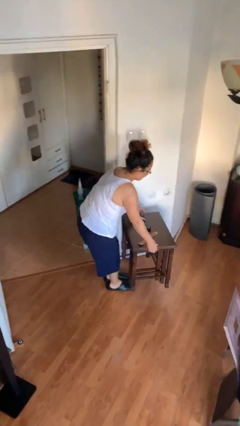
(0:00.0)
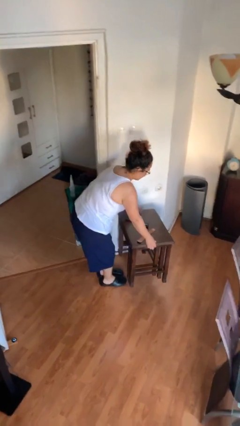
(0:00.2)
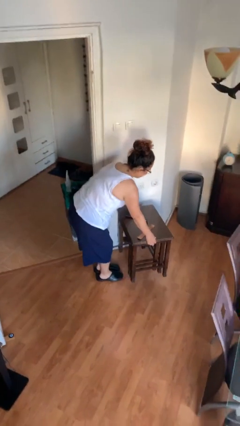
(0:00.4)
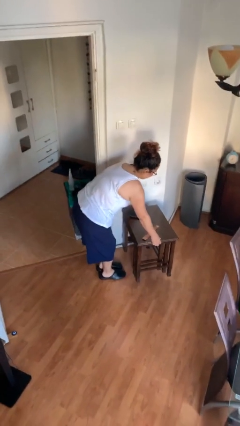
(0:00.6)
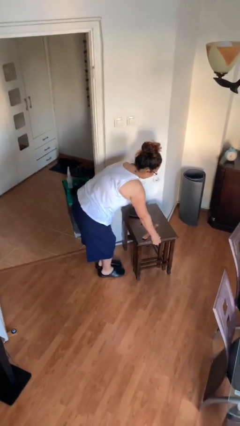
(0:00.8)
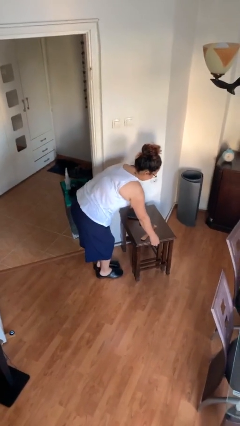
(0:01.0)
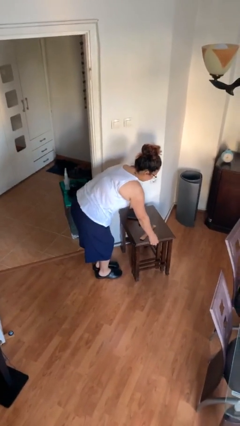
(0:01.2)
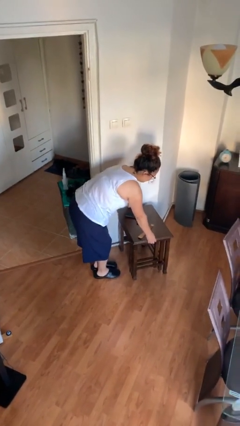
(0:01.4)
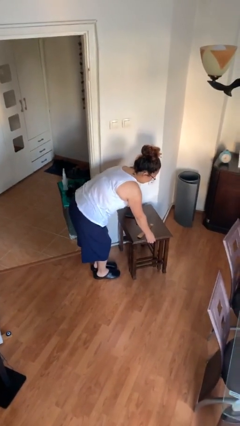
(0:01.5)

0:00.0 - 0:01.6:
person puts down object on floor

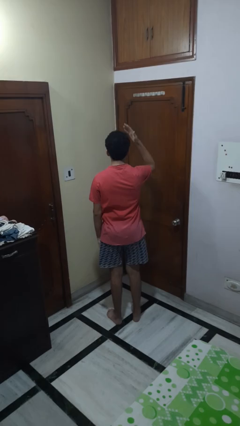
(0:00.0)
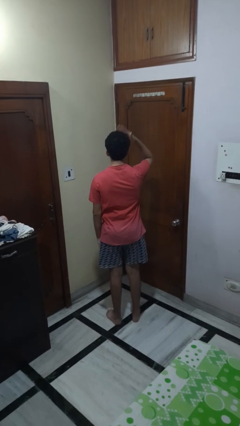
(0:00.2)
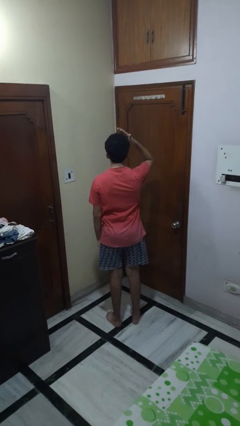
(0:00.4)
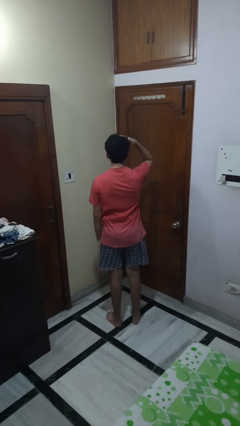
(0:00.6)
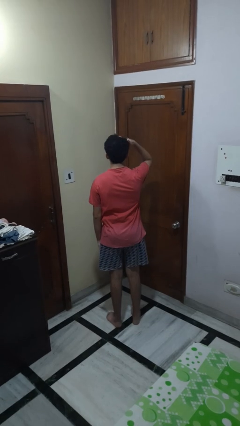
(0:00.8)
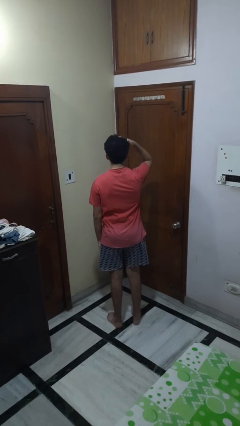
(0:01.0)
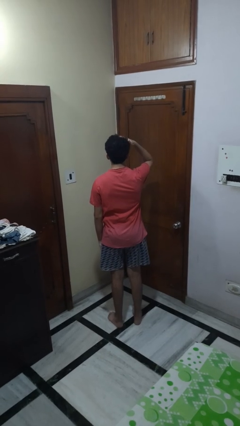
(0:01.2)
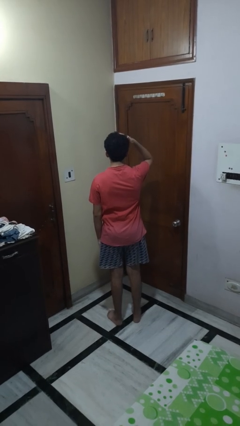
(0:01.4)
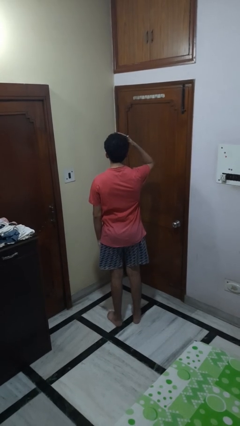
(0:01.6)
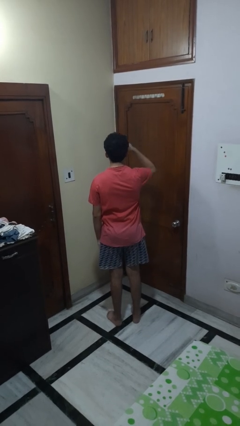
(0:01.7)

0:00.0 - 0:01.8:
person pats head

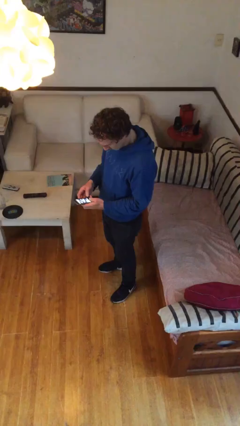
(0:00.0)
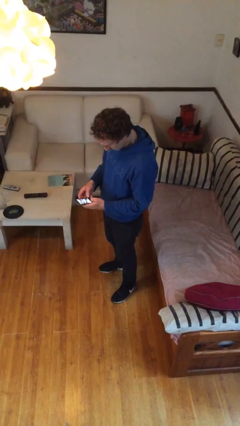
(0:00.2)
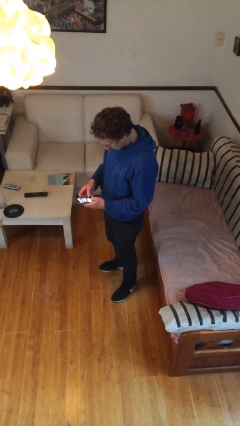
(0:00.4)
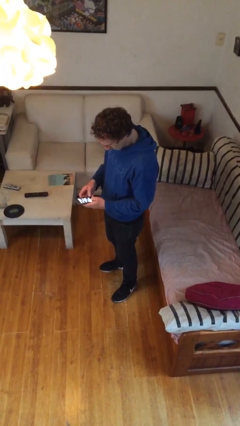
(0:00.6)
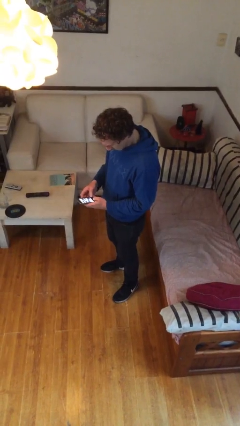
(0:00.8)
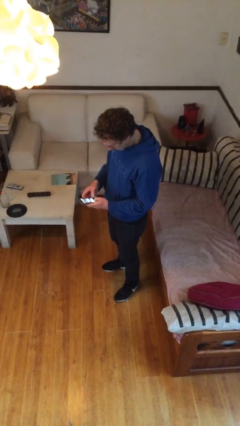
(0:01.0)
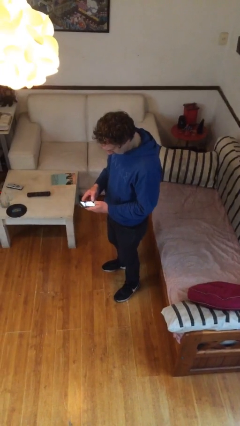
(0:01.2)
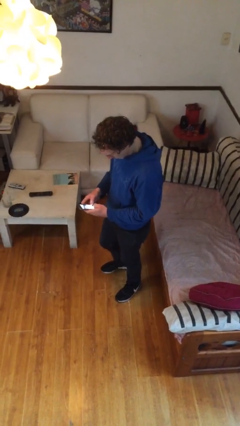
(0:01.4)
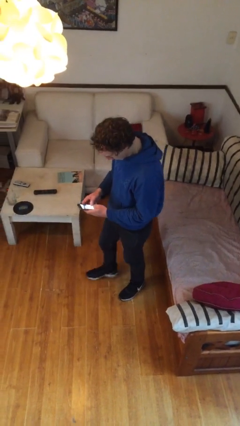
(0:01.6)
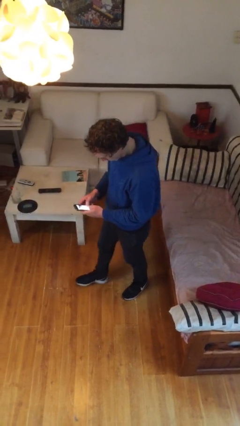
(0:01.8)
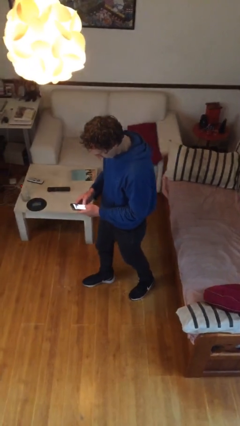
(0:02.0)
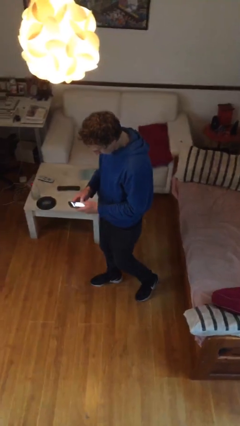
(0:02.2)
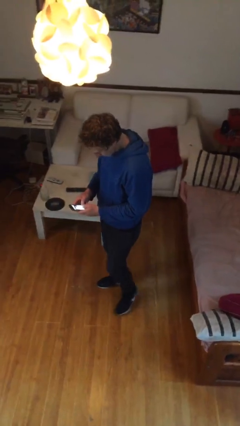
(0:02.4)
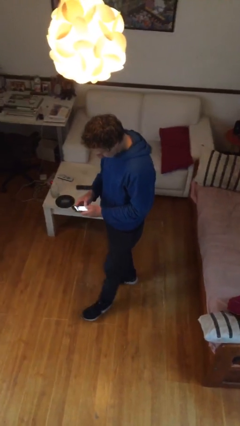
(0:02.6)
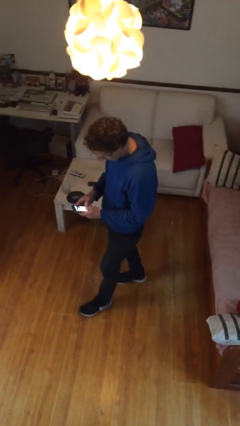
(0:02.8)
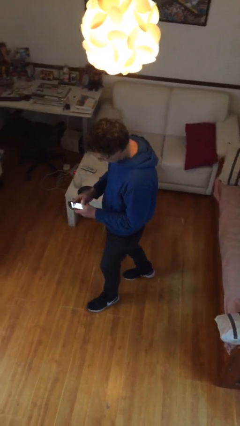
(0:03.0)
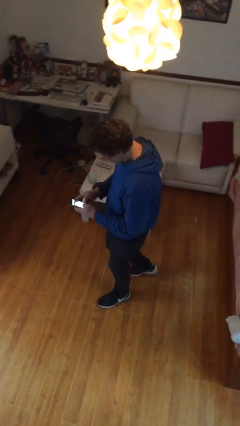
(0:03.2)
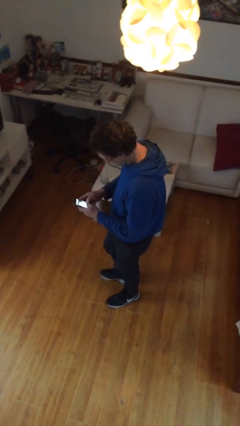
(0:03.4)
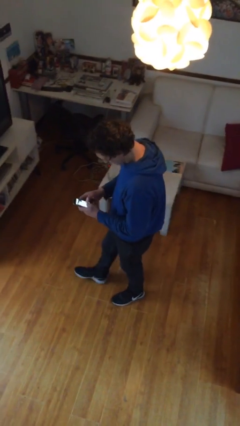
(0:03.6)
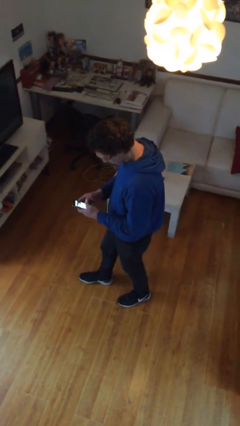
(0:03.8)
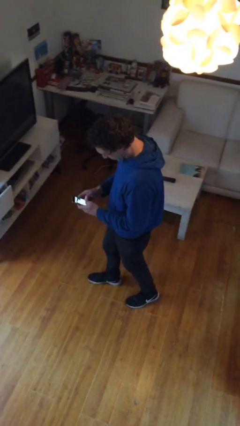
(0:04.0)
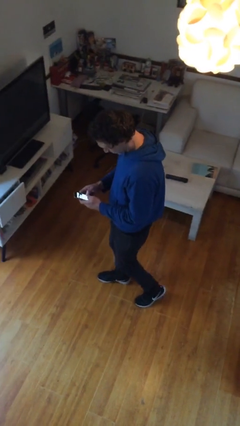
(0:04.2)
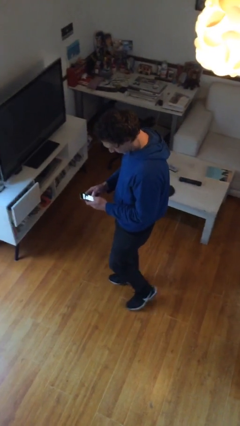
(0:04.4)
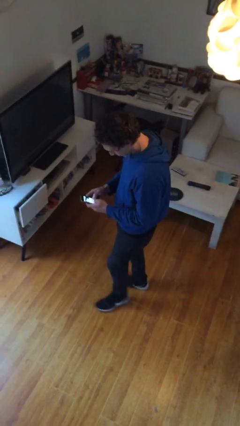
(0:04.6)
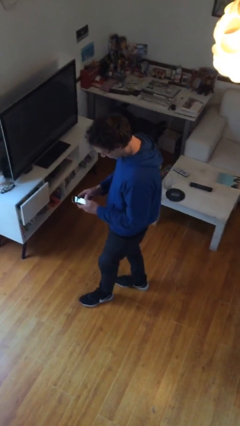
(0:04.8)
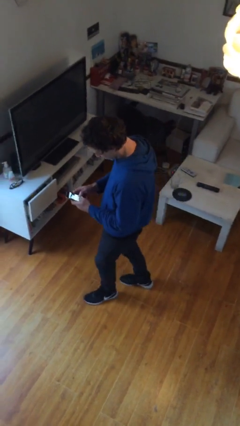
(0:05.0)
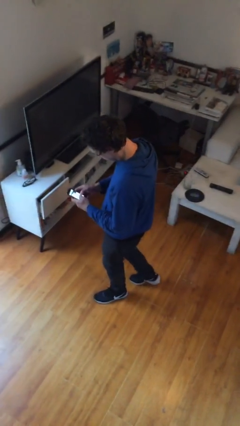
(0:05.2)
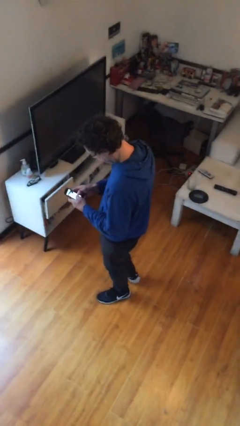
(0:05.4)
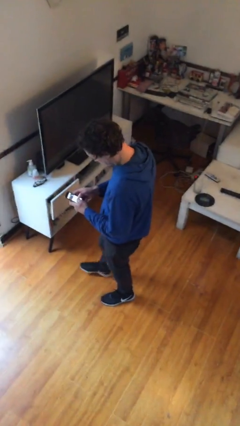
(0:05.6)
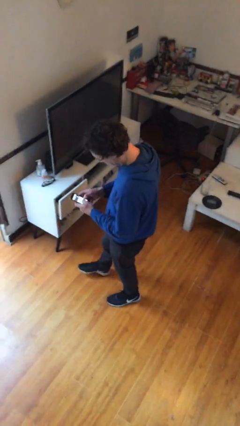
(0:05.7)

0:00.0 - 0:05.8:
person texts on phone

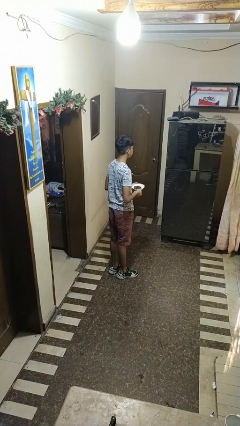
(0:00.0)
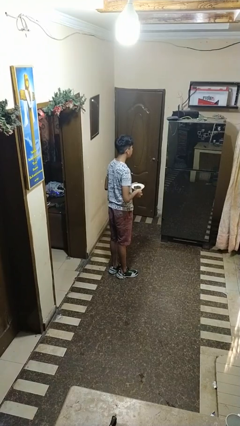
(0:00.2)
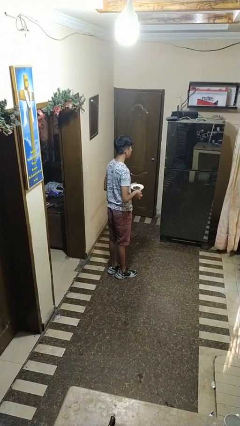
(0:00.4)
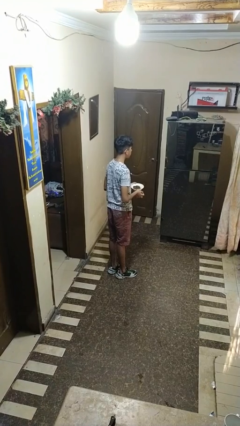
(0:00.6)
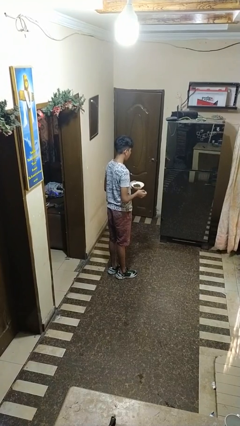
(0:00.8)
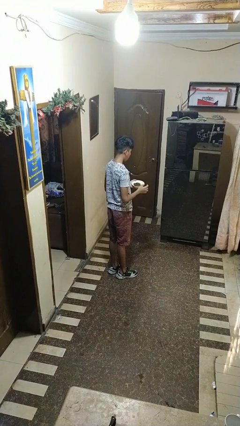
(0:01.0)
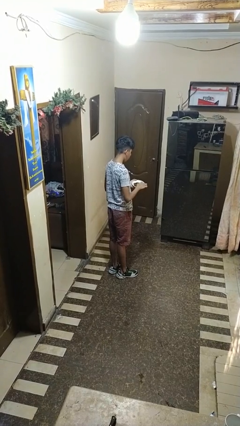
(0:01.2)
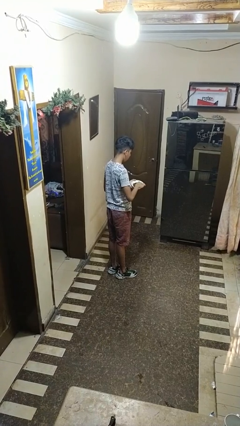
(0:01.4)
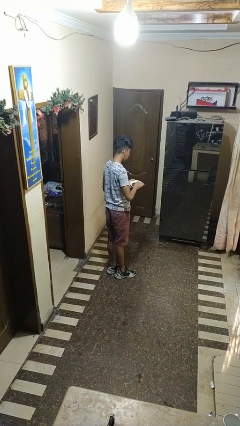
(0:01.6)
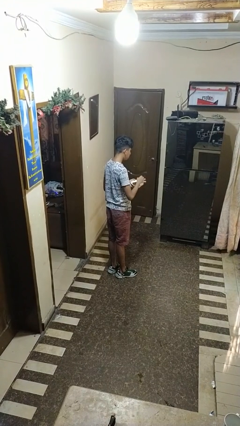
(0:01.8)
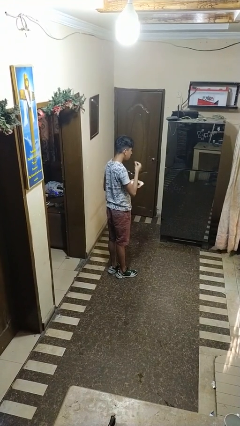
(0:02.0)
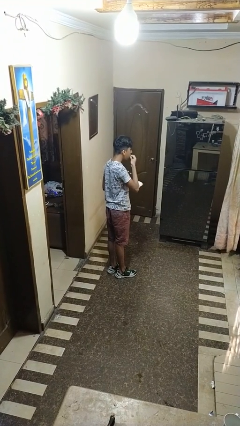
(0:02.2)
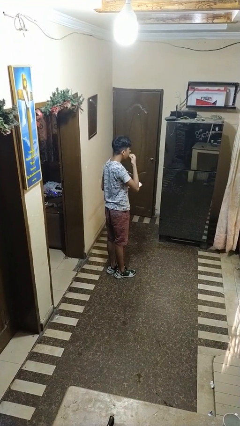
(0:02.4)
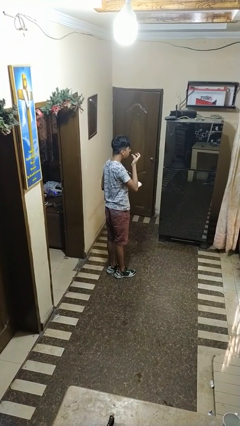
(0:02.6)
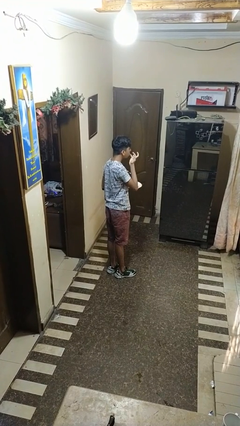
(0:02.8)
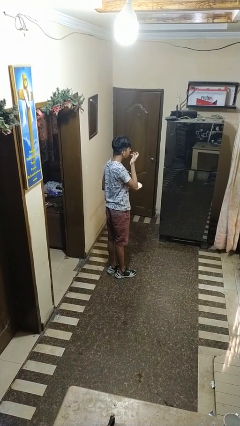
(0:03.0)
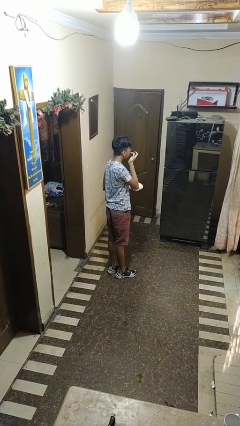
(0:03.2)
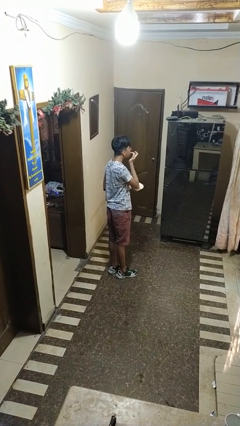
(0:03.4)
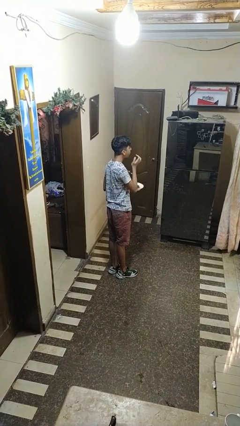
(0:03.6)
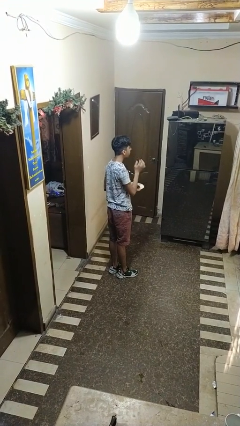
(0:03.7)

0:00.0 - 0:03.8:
person licks fingers

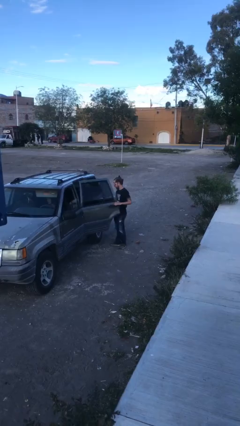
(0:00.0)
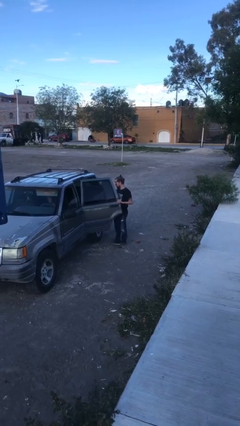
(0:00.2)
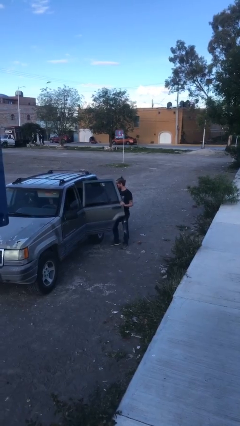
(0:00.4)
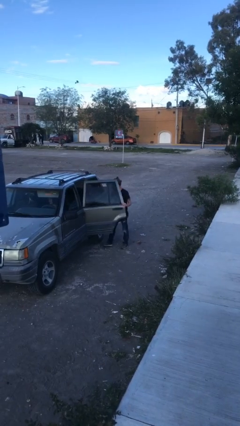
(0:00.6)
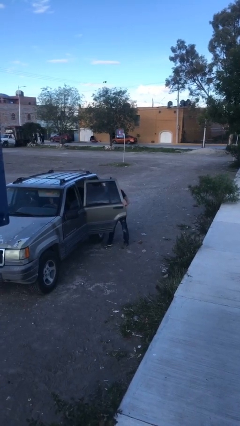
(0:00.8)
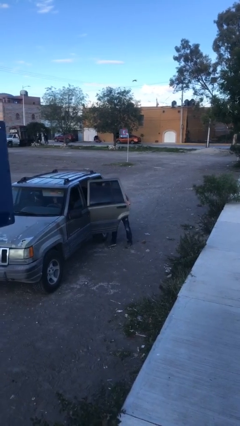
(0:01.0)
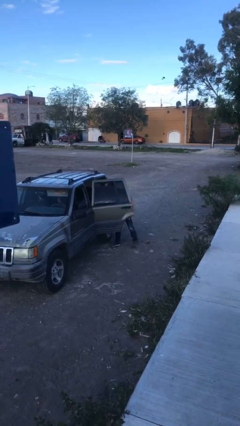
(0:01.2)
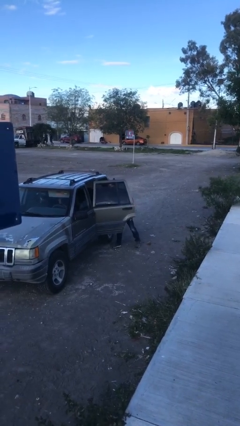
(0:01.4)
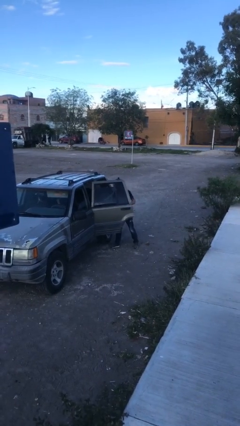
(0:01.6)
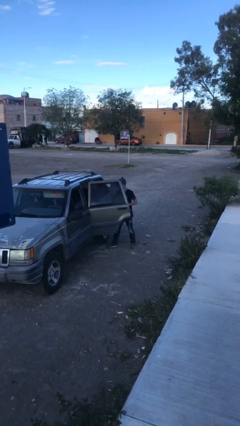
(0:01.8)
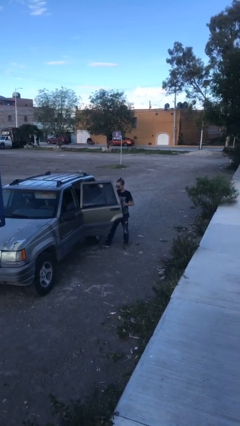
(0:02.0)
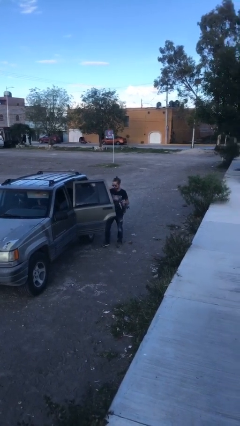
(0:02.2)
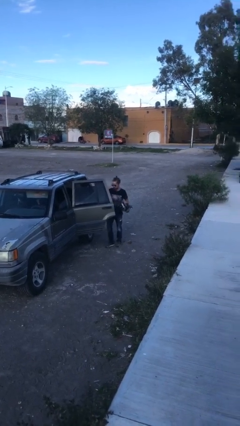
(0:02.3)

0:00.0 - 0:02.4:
person unloads car

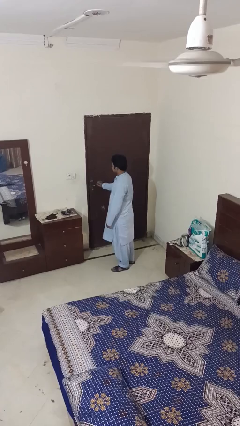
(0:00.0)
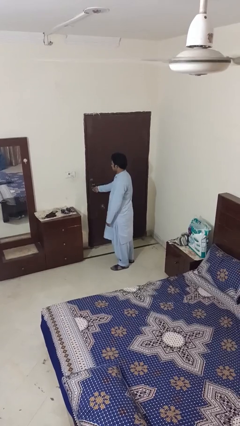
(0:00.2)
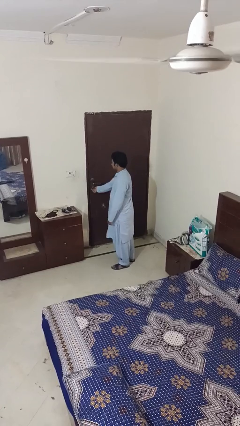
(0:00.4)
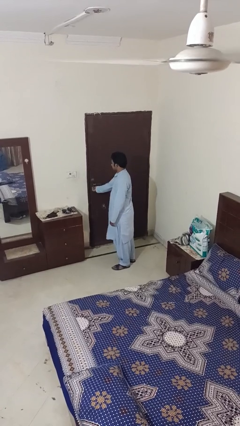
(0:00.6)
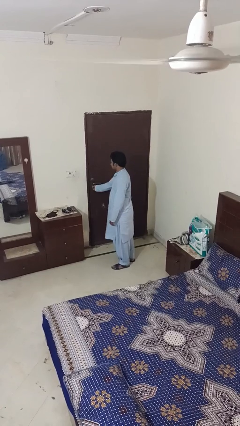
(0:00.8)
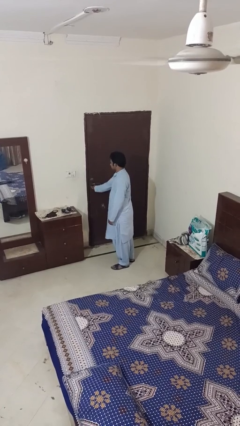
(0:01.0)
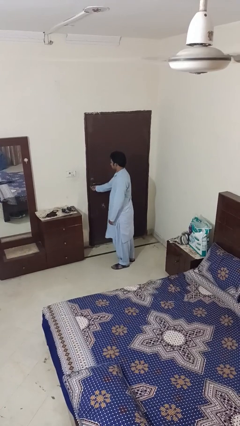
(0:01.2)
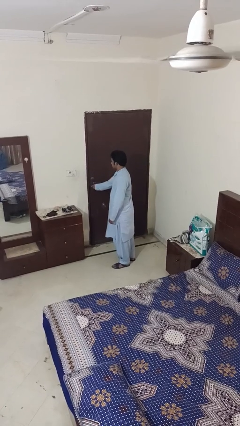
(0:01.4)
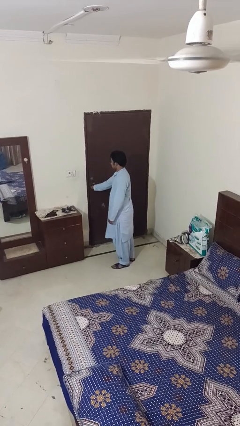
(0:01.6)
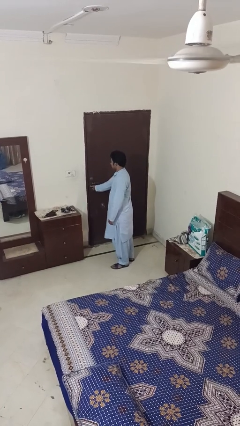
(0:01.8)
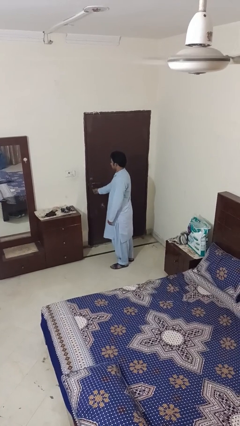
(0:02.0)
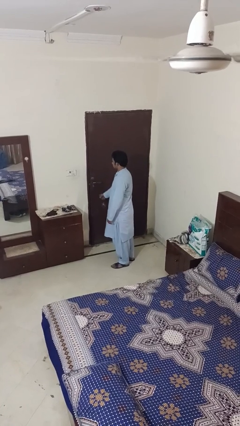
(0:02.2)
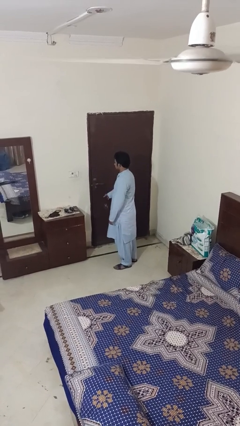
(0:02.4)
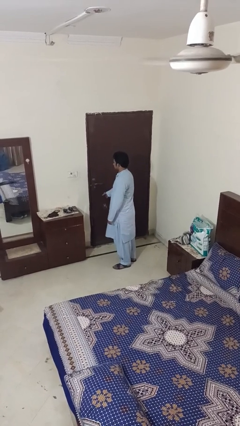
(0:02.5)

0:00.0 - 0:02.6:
person locks door with keys
